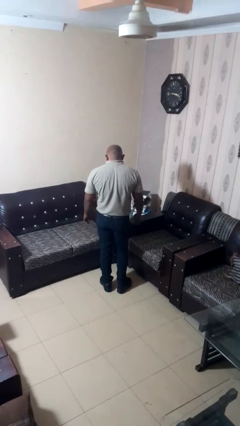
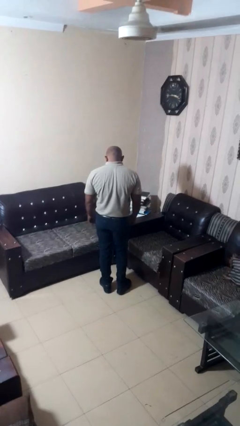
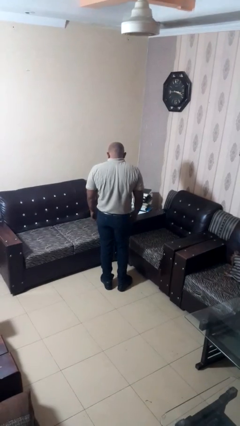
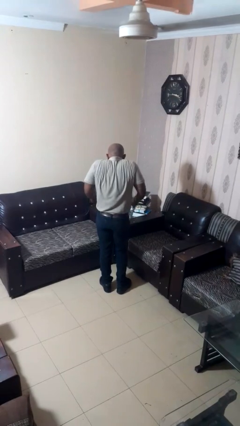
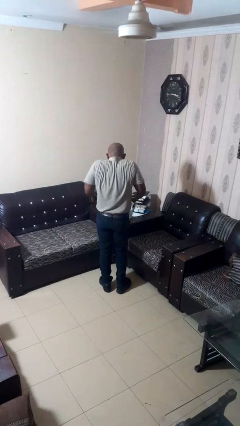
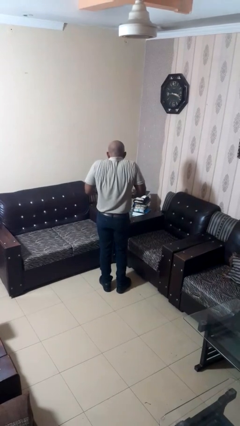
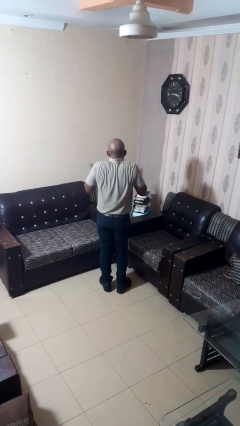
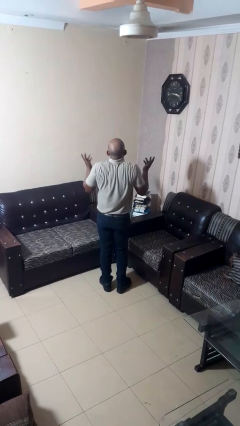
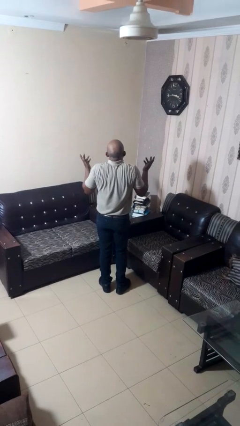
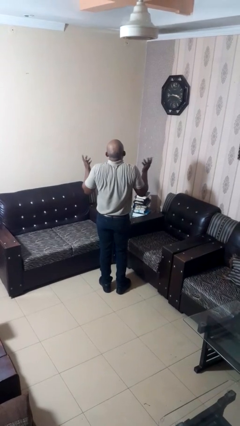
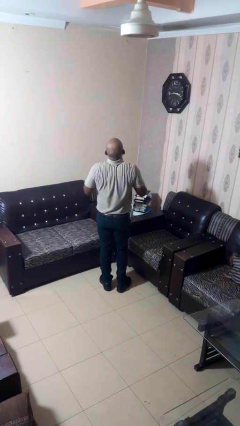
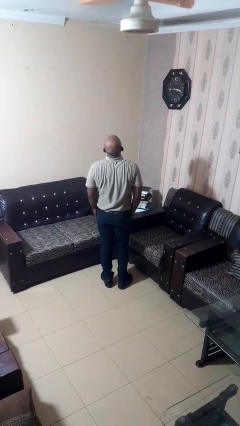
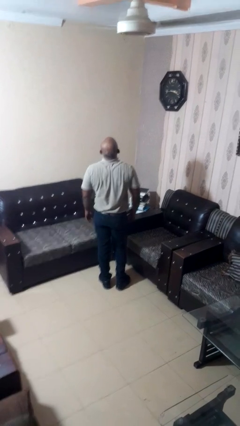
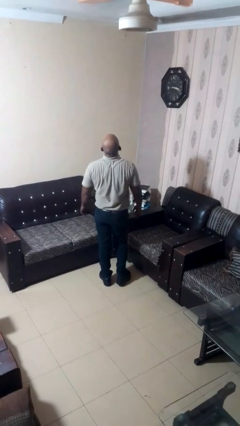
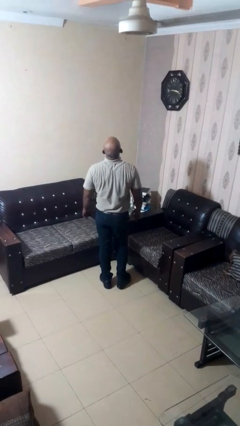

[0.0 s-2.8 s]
person shrugs

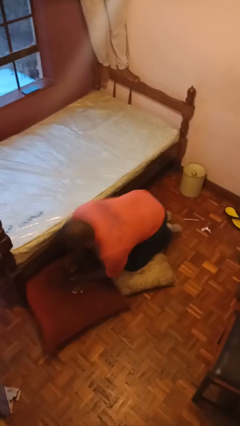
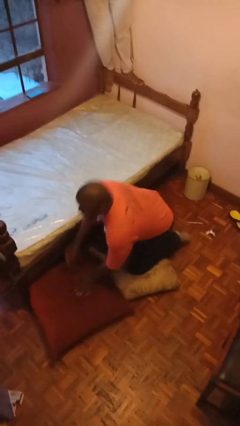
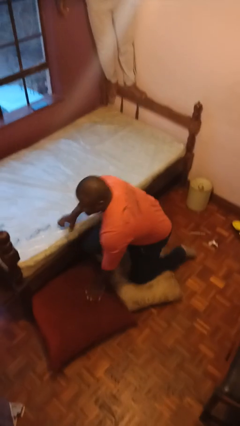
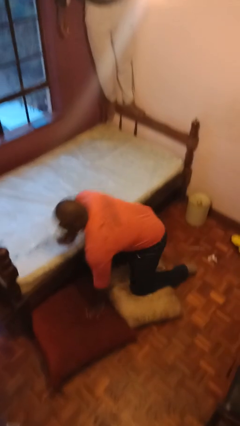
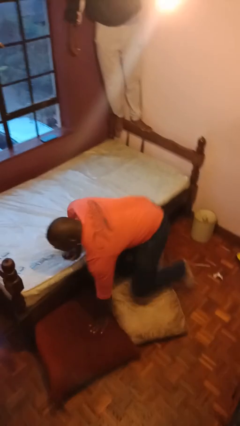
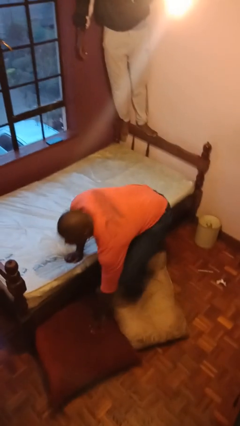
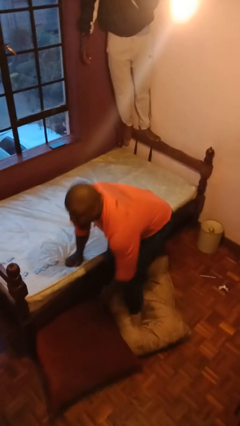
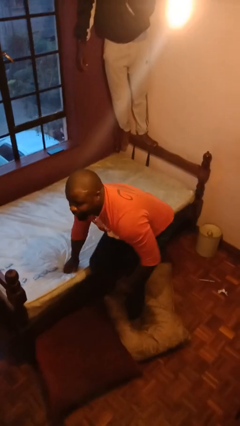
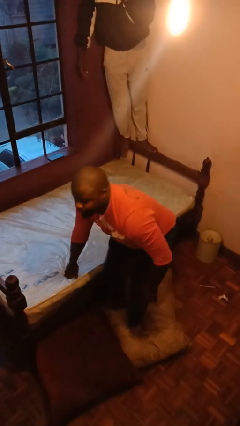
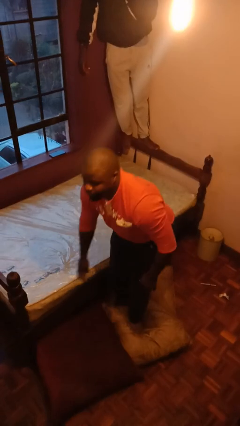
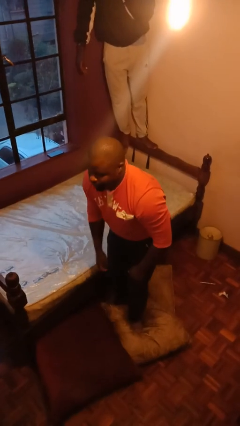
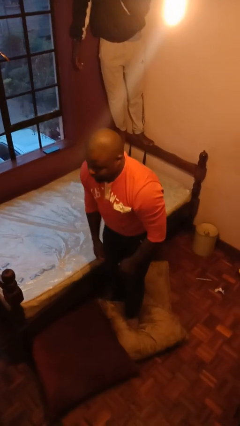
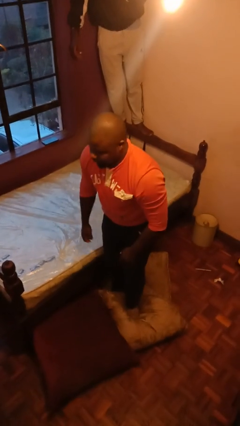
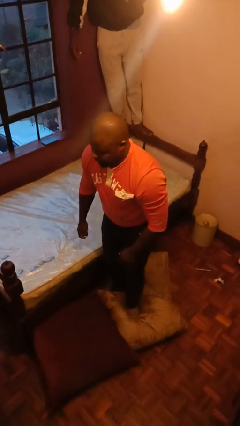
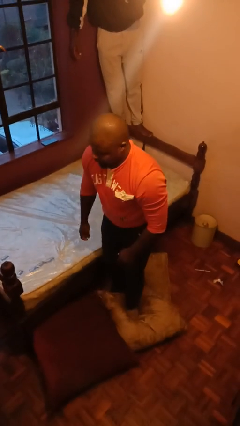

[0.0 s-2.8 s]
person stands up from floor

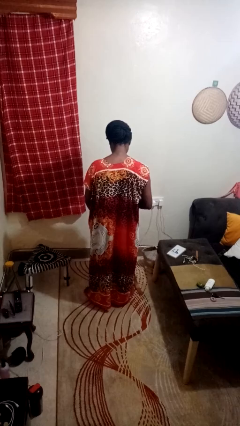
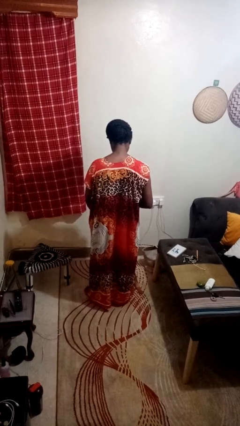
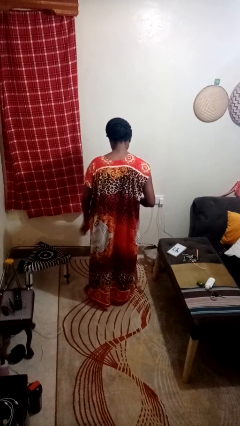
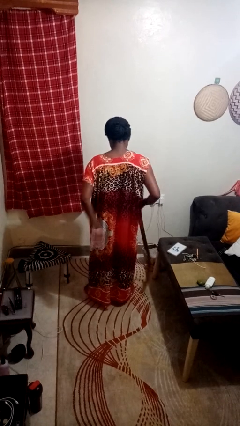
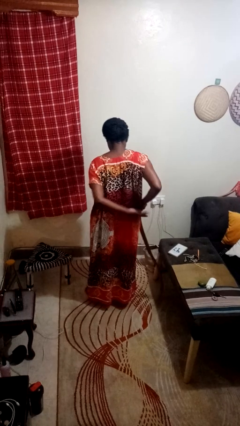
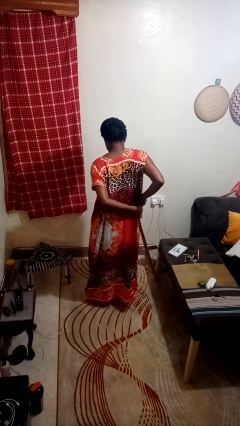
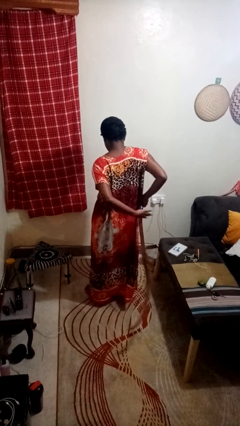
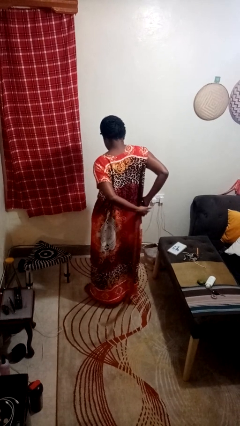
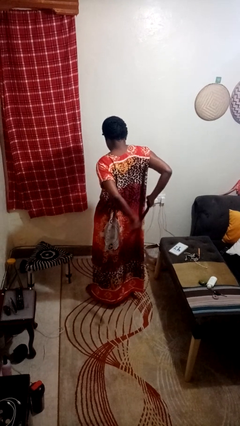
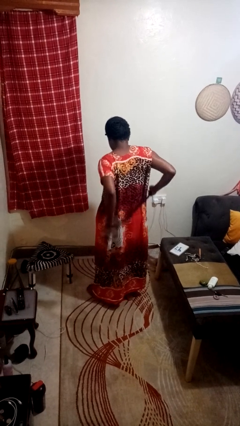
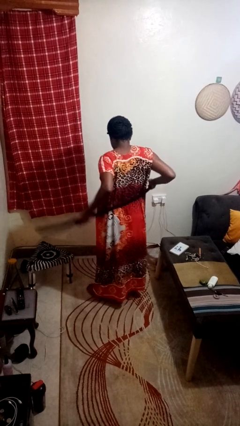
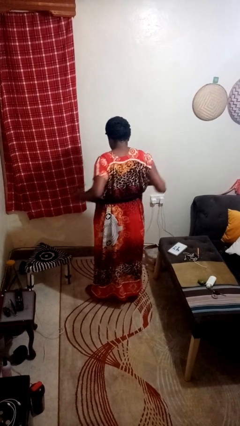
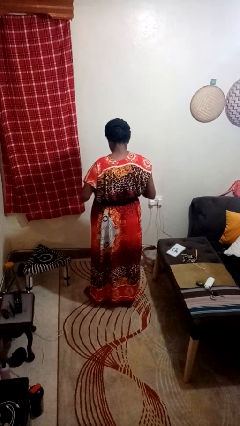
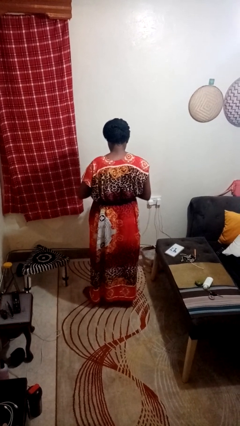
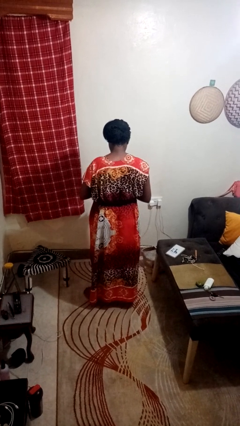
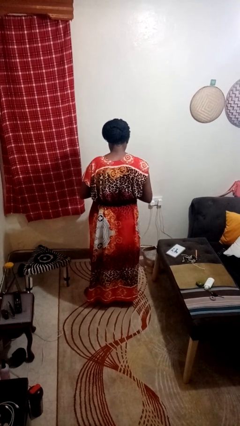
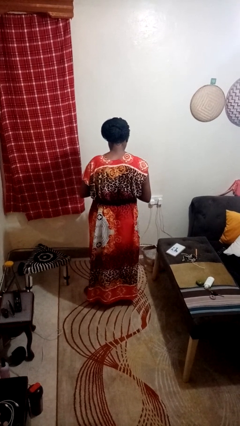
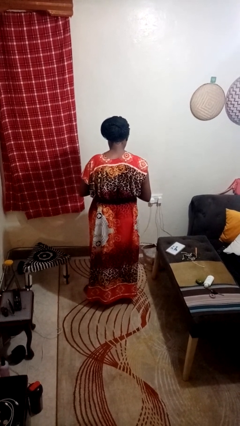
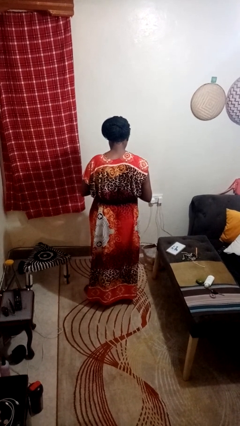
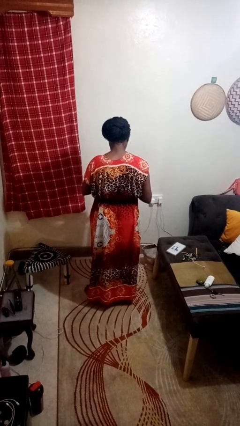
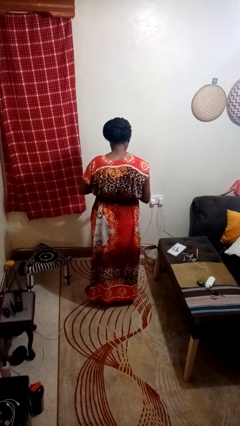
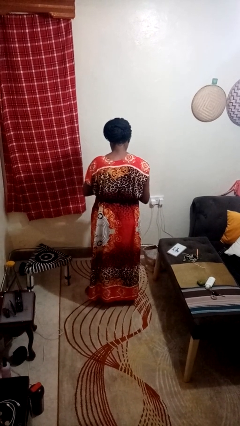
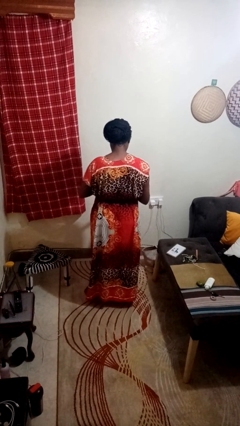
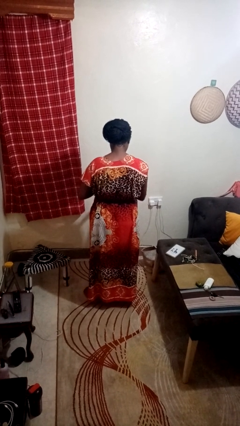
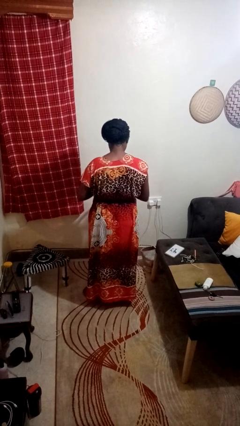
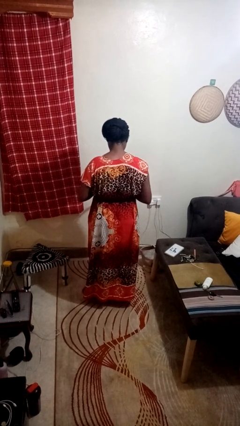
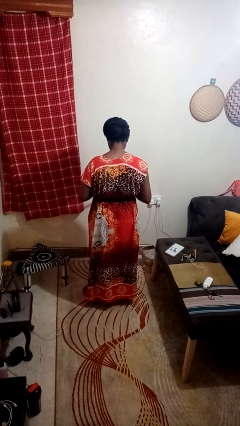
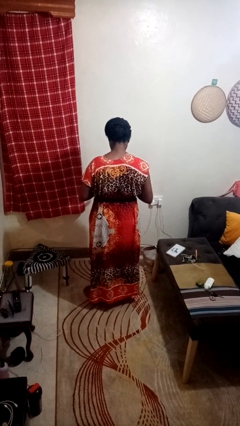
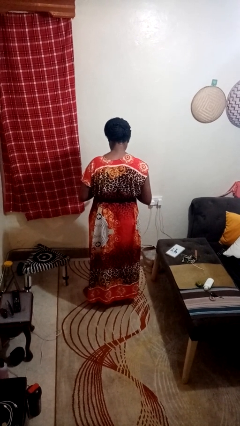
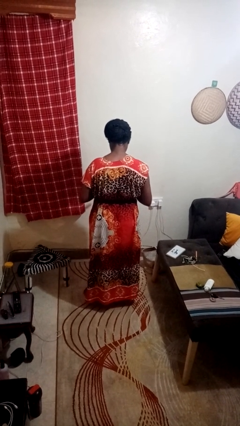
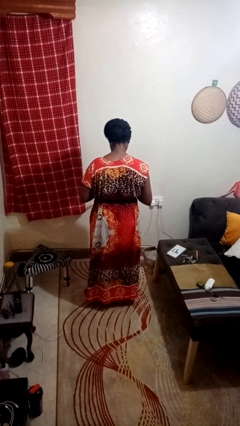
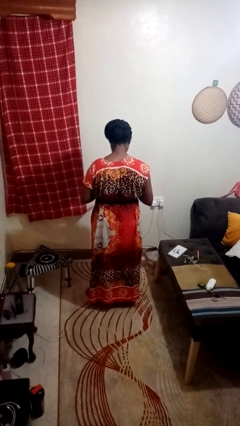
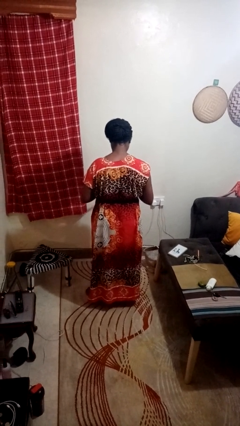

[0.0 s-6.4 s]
person puts on belt

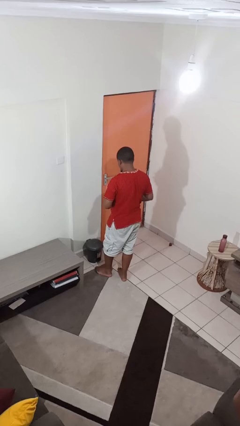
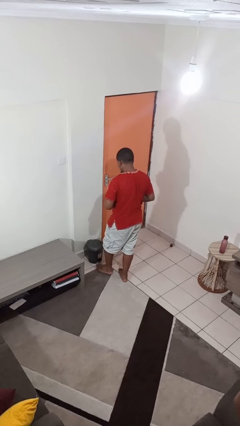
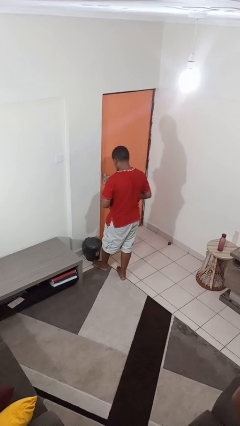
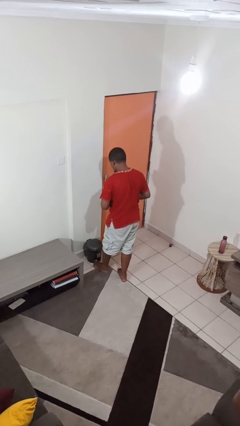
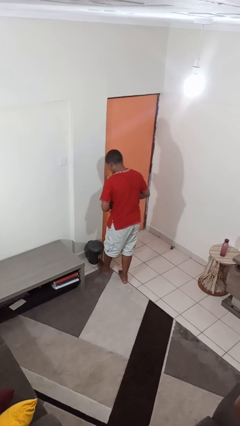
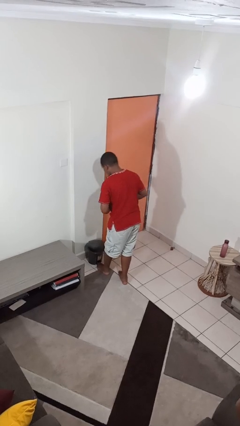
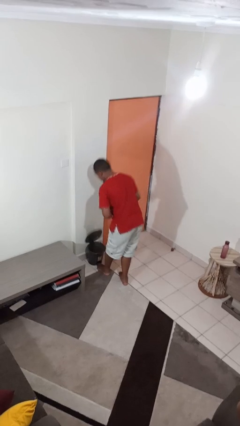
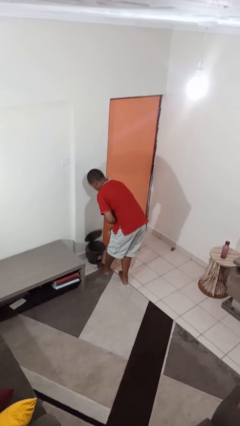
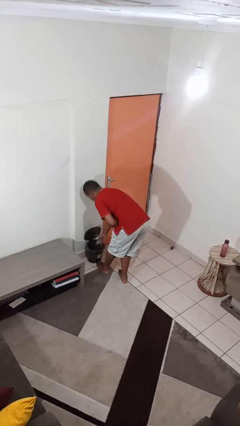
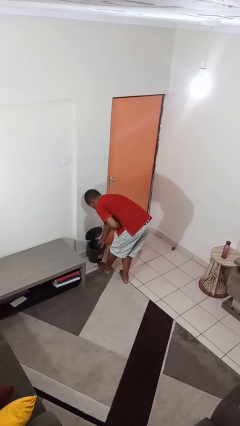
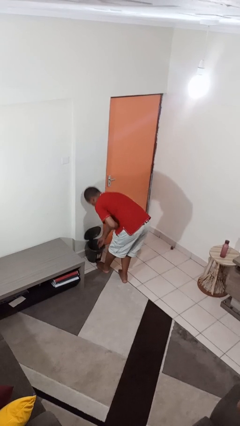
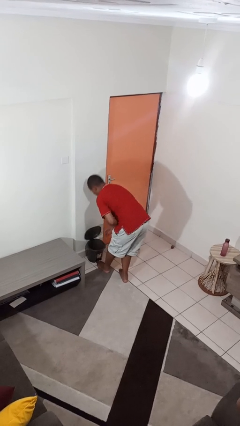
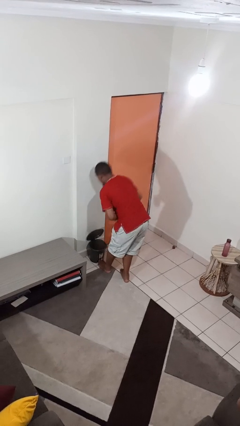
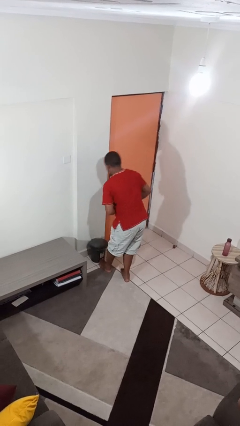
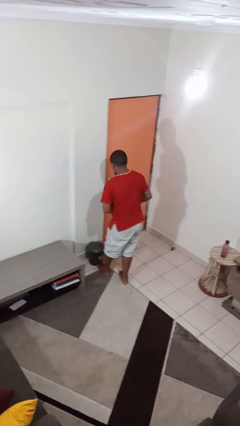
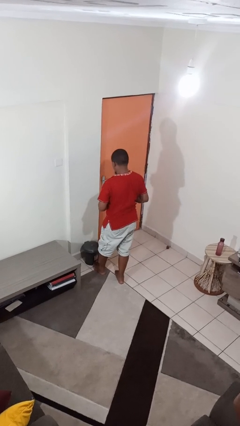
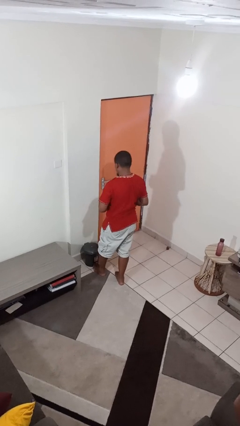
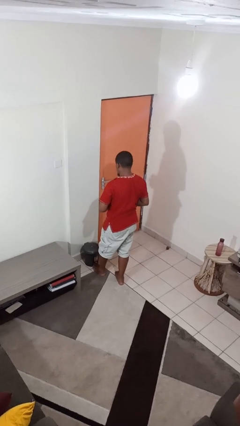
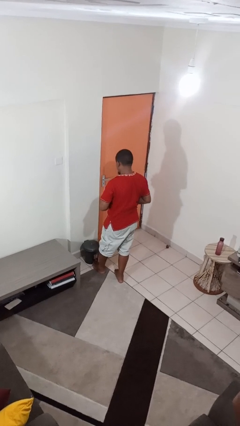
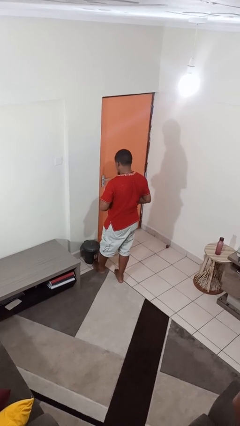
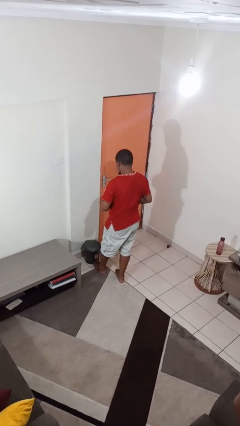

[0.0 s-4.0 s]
person discards trash

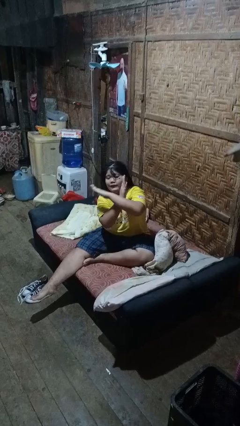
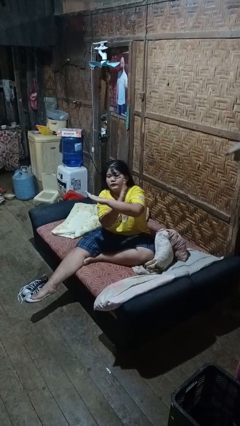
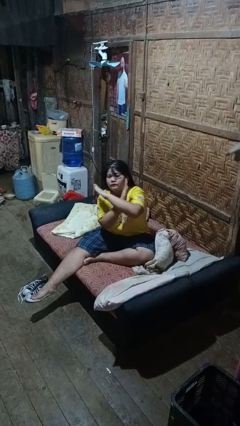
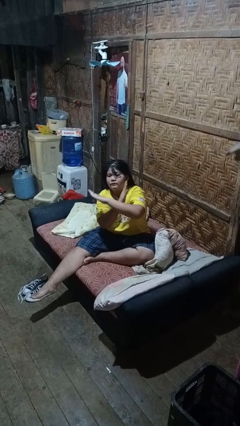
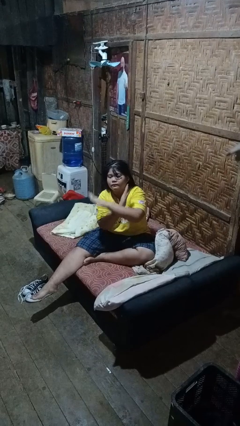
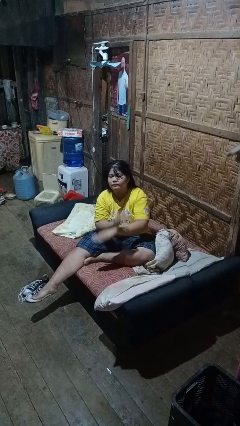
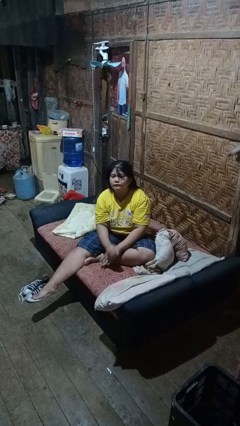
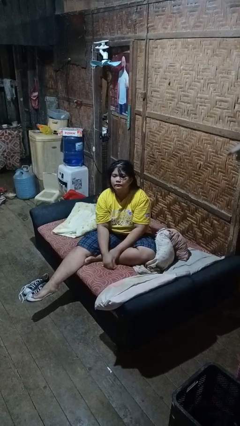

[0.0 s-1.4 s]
person gestures cut
